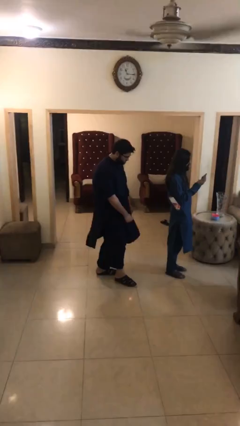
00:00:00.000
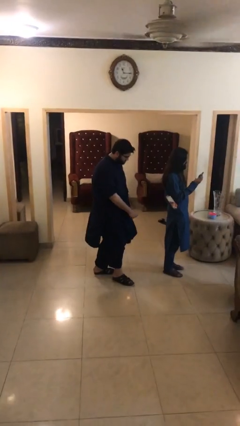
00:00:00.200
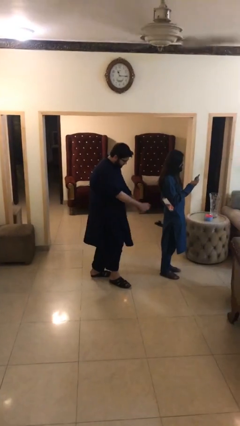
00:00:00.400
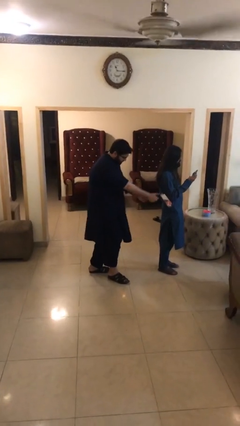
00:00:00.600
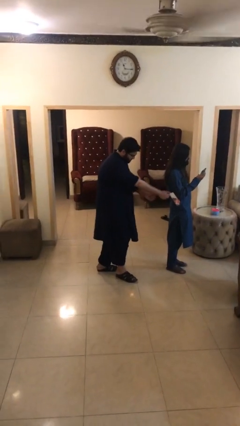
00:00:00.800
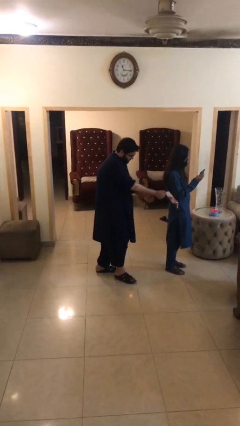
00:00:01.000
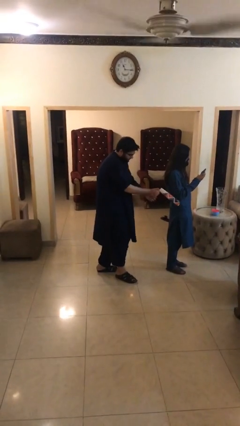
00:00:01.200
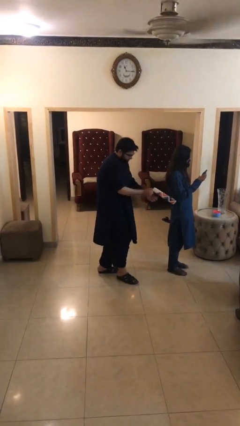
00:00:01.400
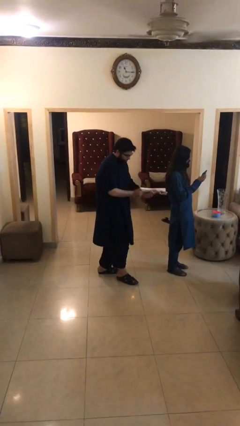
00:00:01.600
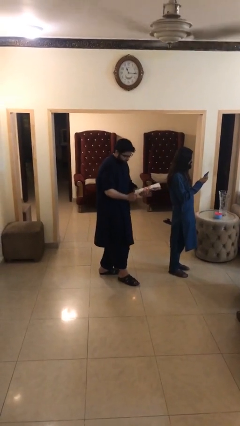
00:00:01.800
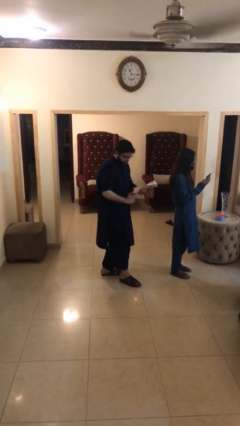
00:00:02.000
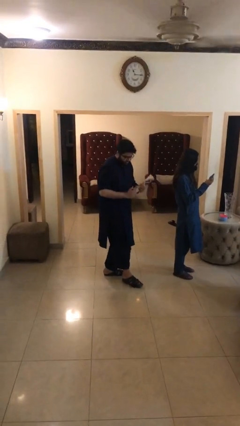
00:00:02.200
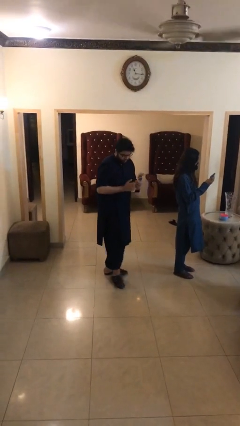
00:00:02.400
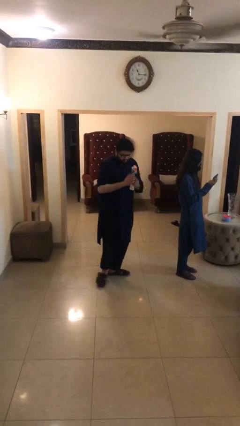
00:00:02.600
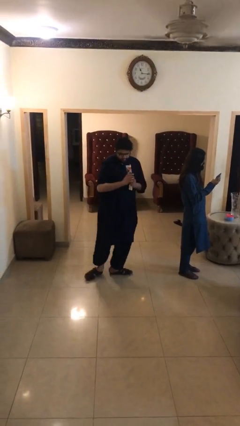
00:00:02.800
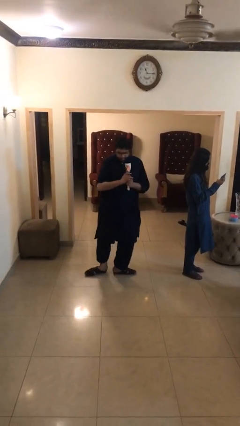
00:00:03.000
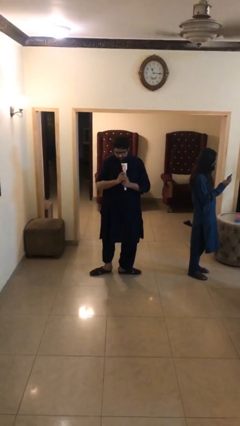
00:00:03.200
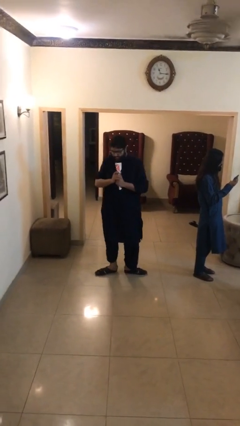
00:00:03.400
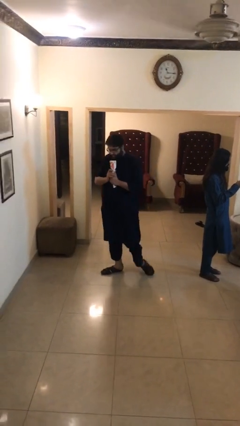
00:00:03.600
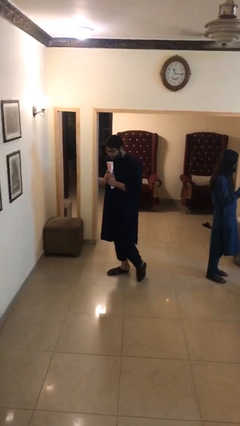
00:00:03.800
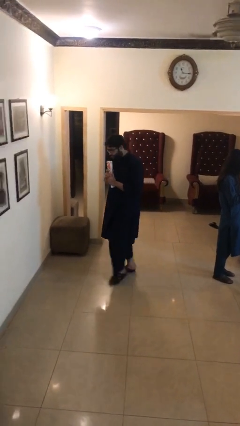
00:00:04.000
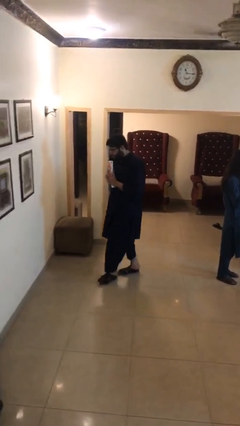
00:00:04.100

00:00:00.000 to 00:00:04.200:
person steals object from person

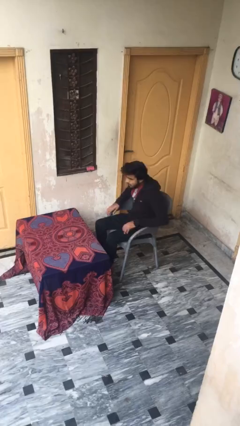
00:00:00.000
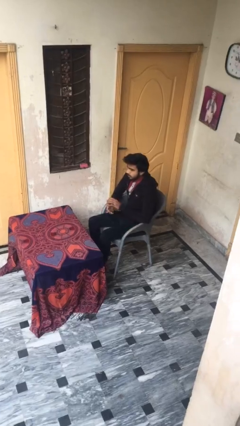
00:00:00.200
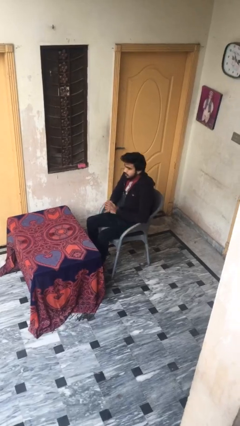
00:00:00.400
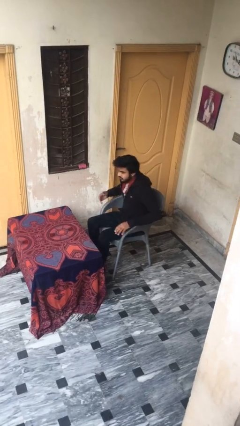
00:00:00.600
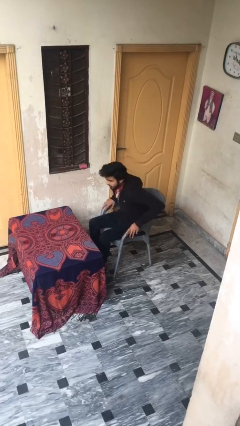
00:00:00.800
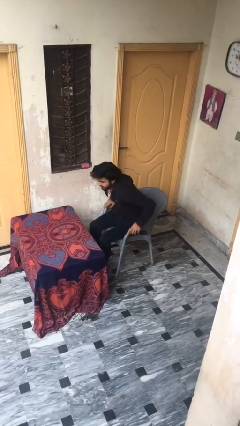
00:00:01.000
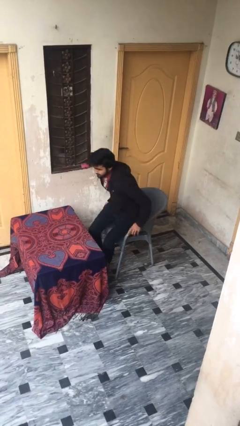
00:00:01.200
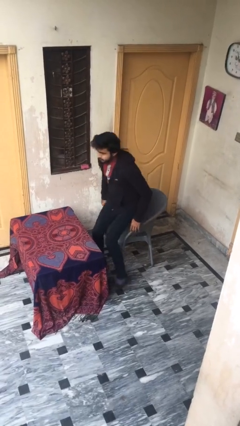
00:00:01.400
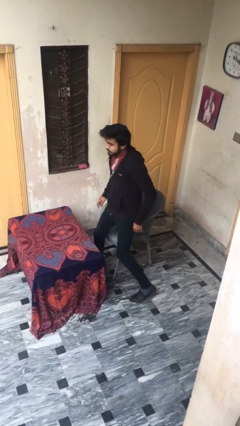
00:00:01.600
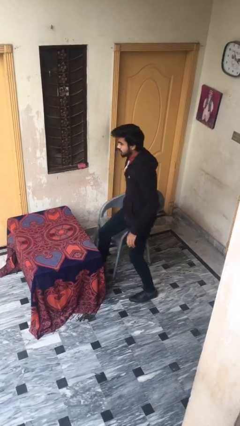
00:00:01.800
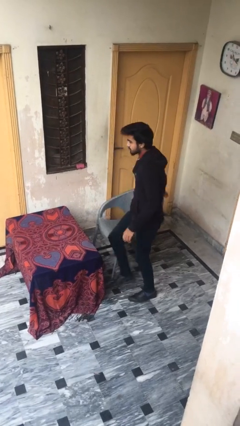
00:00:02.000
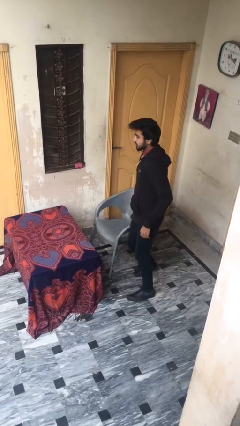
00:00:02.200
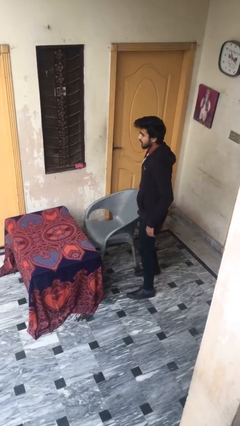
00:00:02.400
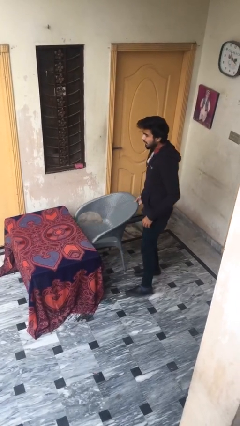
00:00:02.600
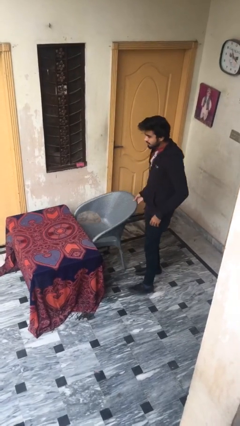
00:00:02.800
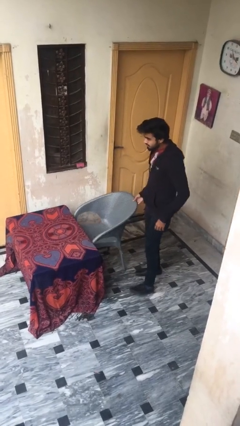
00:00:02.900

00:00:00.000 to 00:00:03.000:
person stands up

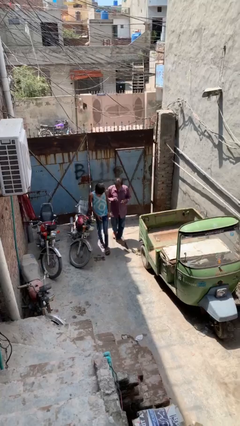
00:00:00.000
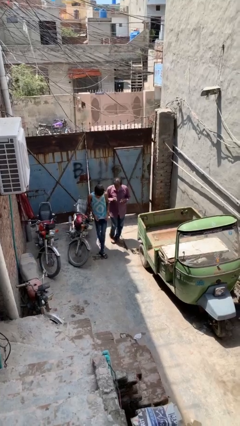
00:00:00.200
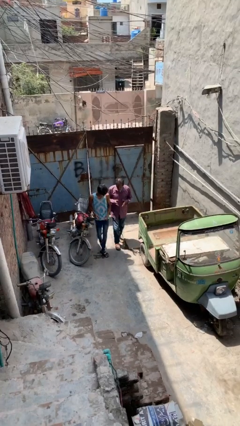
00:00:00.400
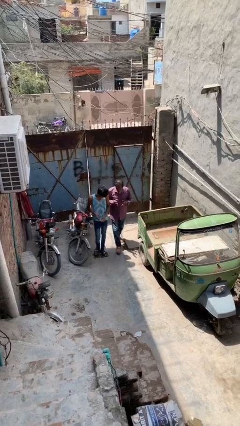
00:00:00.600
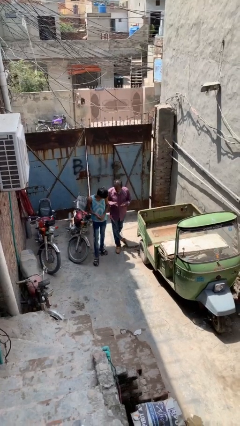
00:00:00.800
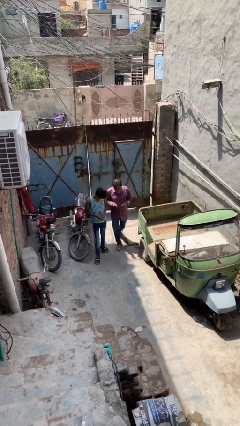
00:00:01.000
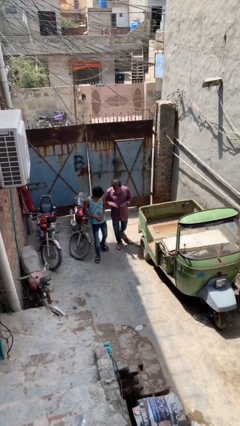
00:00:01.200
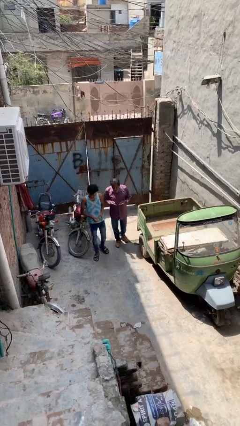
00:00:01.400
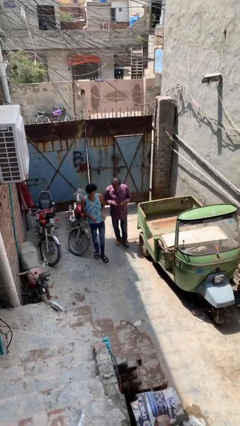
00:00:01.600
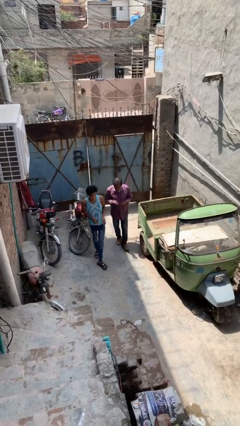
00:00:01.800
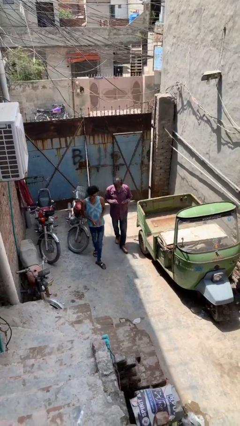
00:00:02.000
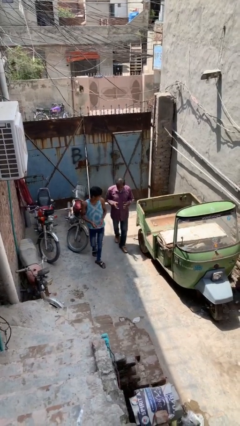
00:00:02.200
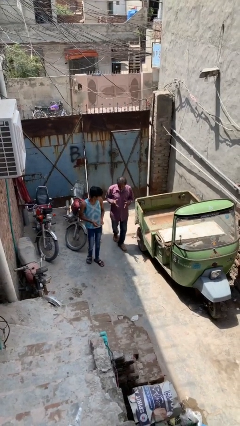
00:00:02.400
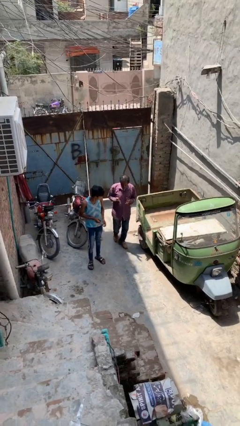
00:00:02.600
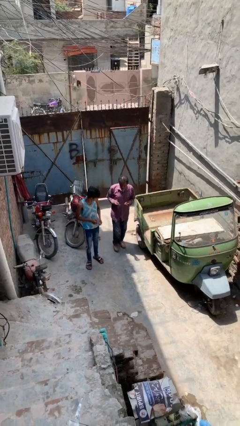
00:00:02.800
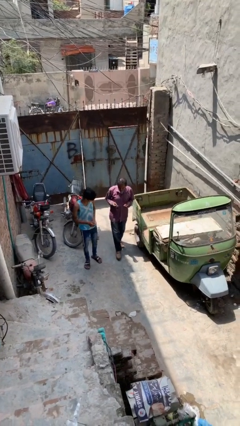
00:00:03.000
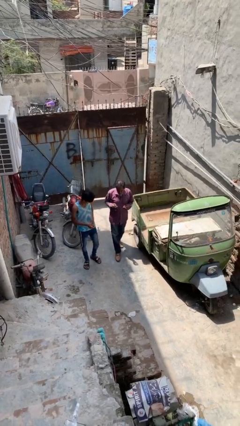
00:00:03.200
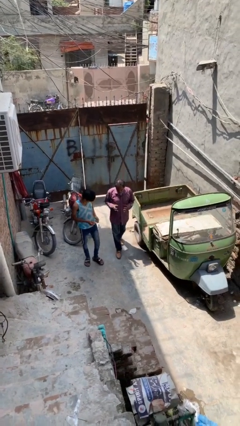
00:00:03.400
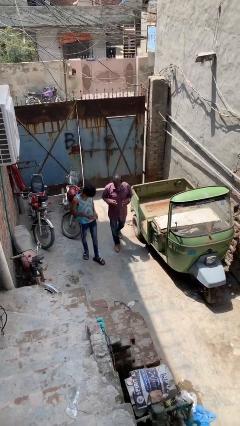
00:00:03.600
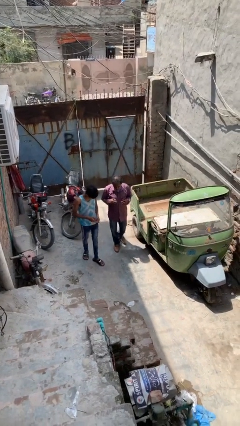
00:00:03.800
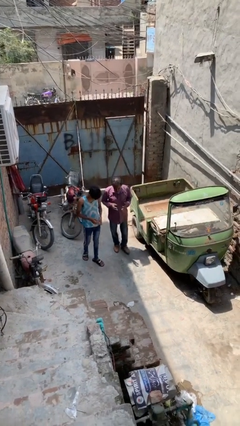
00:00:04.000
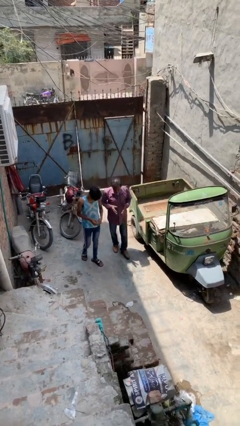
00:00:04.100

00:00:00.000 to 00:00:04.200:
person talks to person

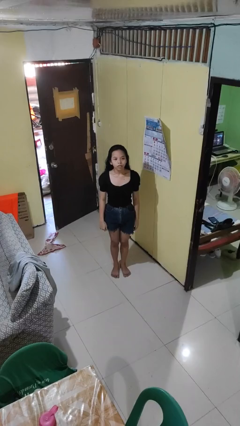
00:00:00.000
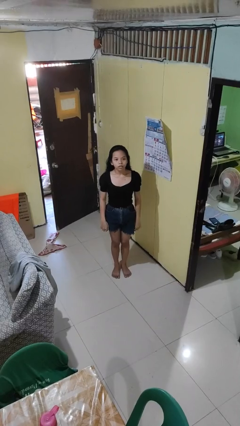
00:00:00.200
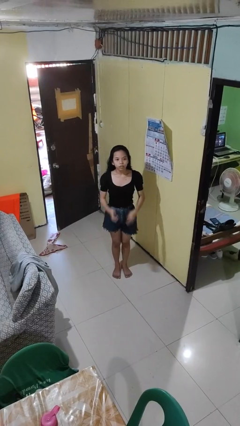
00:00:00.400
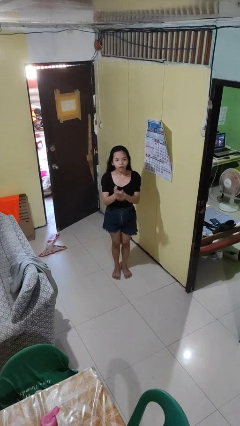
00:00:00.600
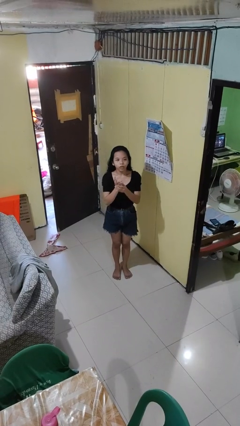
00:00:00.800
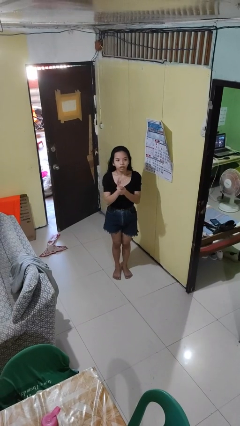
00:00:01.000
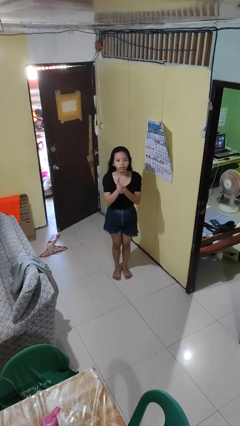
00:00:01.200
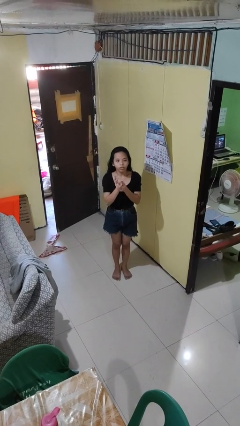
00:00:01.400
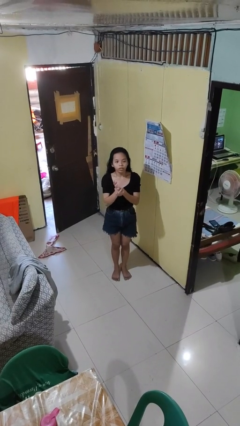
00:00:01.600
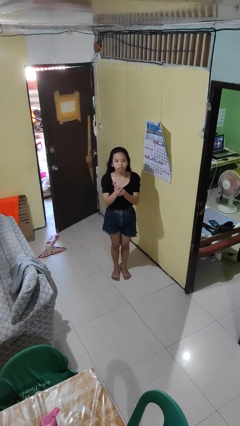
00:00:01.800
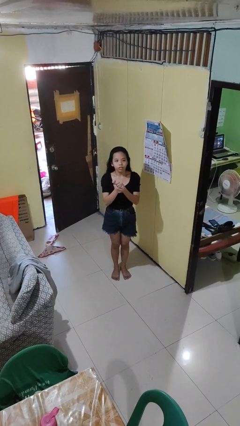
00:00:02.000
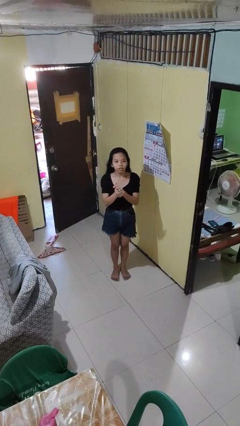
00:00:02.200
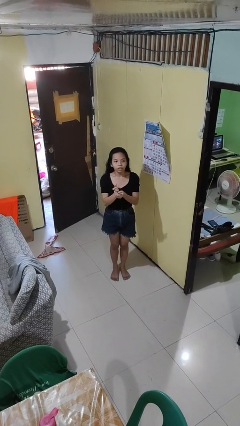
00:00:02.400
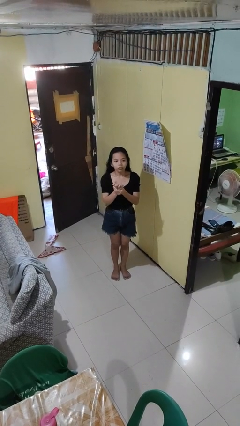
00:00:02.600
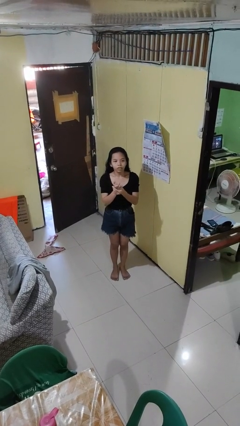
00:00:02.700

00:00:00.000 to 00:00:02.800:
person cracks knuckles

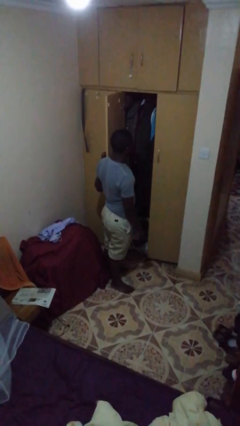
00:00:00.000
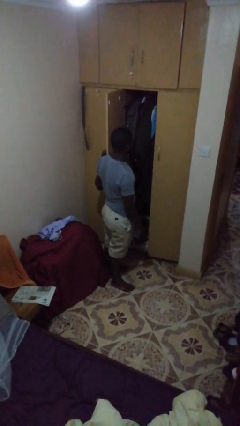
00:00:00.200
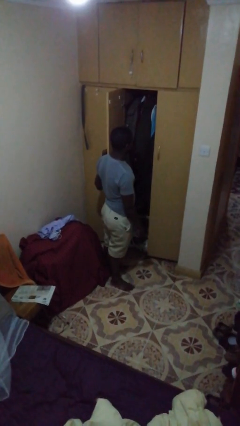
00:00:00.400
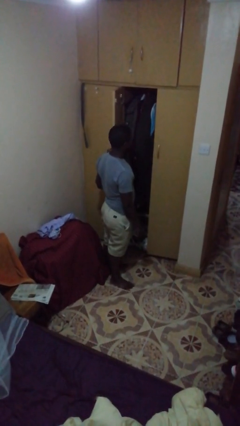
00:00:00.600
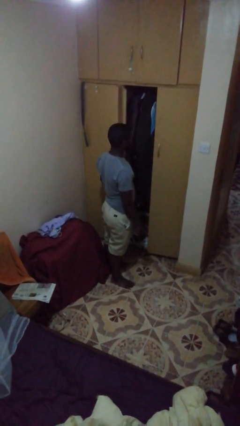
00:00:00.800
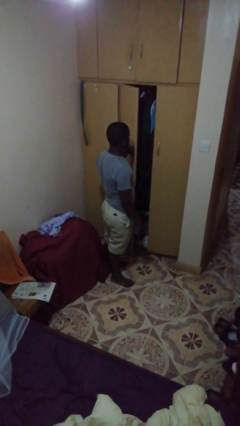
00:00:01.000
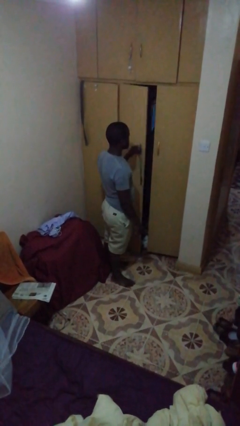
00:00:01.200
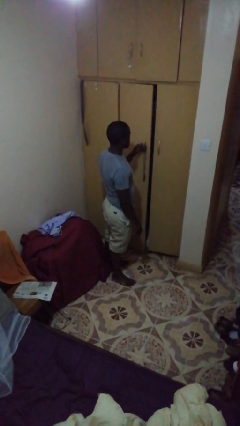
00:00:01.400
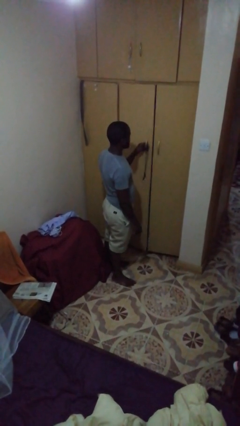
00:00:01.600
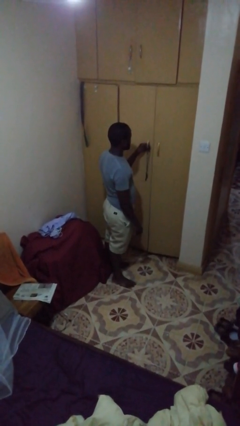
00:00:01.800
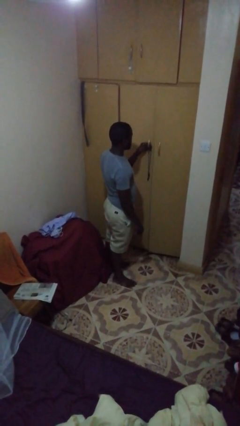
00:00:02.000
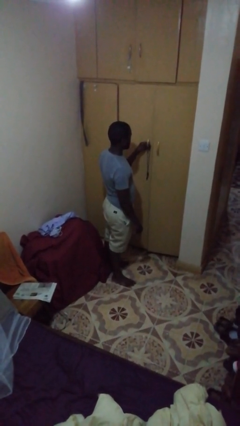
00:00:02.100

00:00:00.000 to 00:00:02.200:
person closes closet door

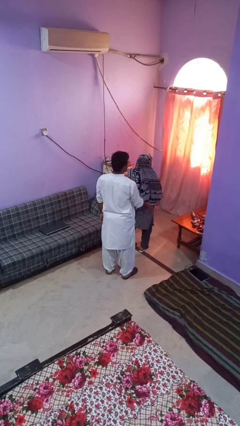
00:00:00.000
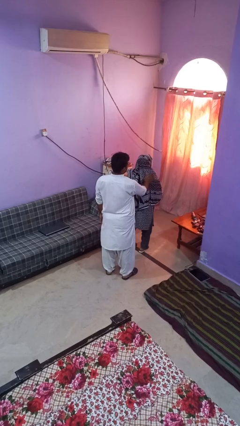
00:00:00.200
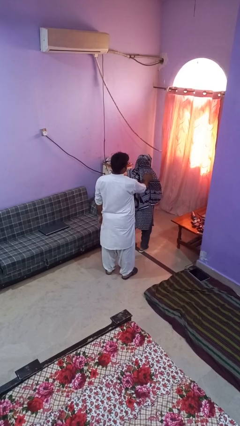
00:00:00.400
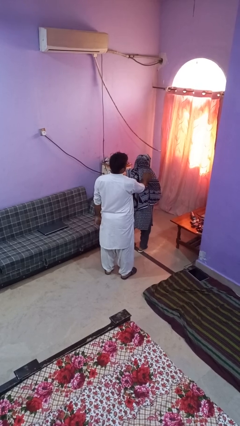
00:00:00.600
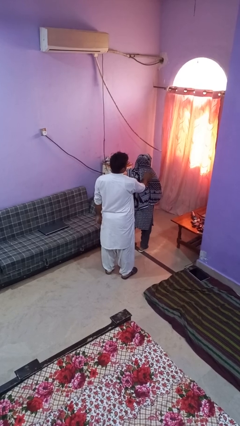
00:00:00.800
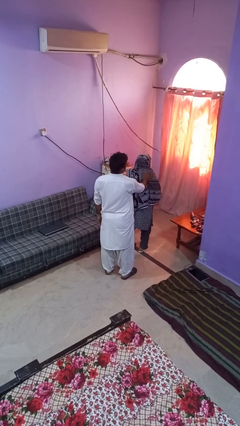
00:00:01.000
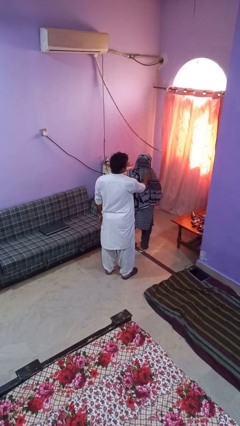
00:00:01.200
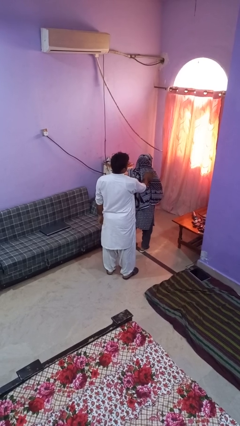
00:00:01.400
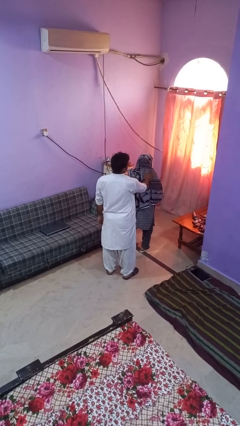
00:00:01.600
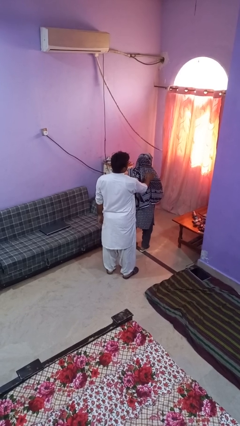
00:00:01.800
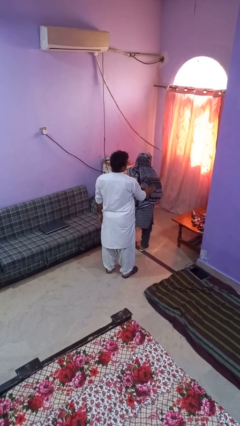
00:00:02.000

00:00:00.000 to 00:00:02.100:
person touches back of person
